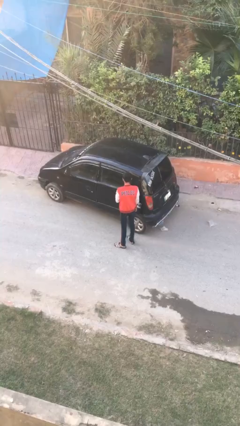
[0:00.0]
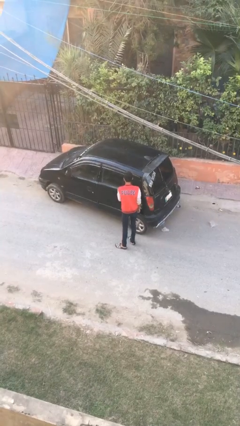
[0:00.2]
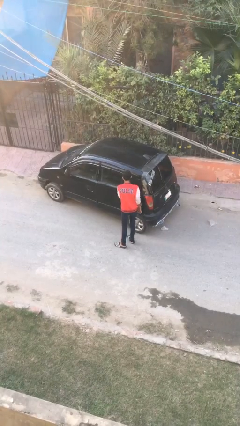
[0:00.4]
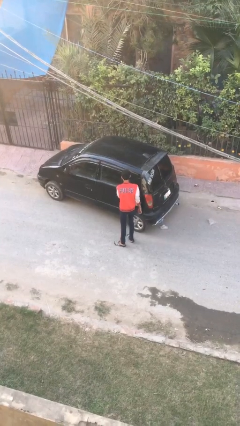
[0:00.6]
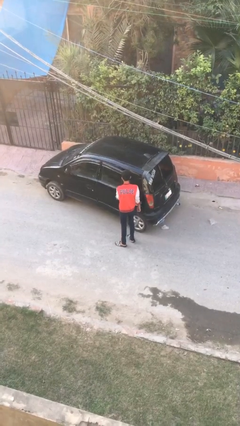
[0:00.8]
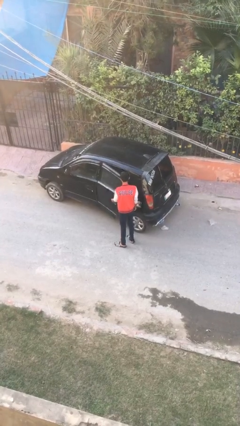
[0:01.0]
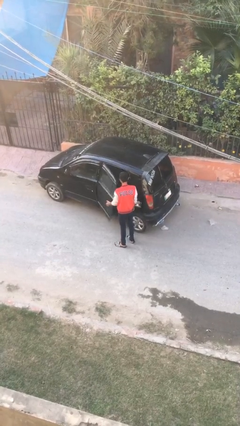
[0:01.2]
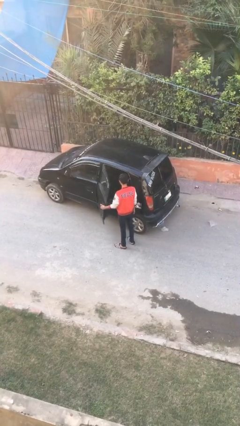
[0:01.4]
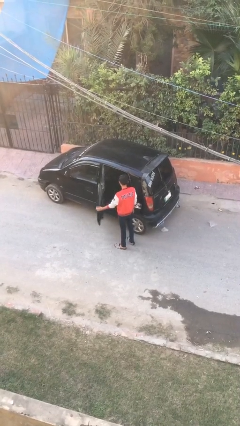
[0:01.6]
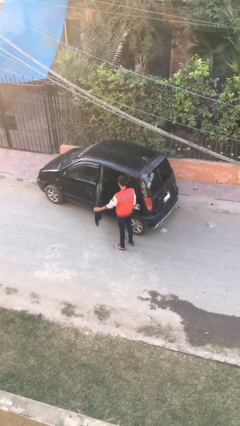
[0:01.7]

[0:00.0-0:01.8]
person opens car door

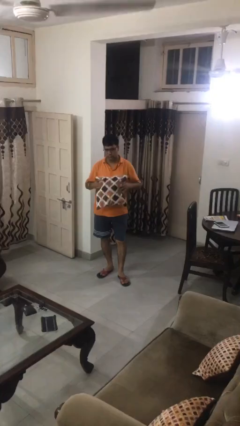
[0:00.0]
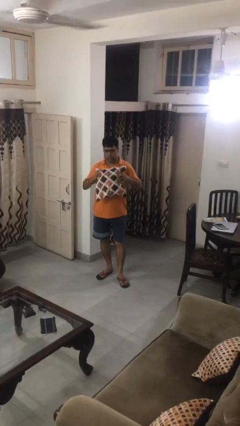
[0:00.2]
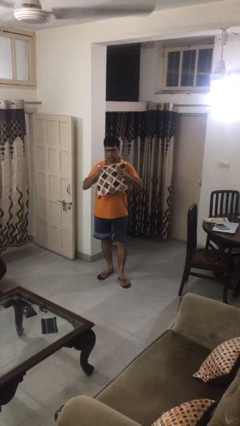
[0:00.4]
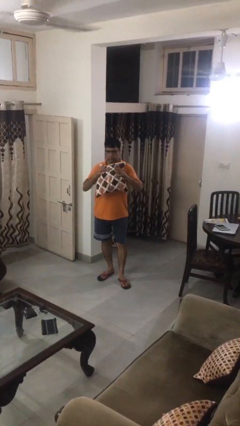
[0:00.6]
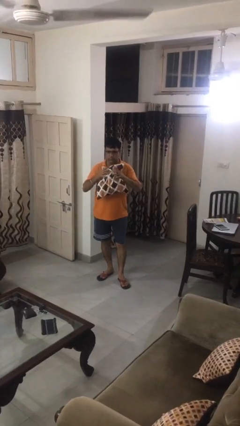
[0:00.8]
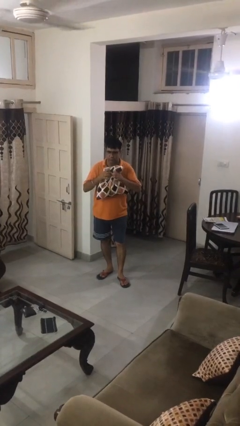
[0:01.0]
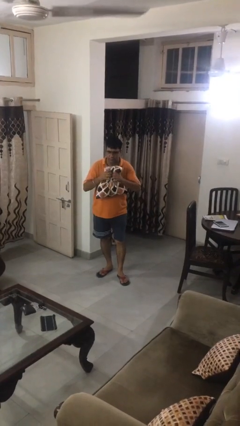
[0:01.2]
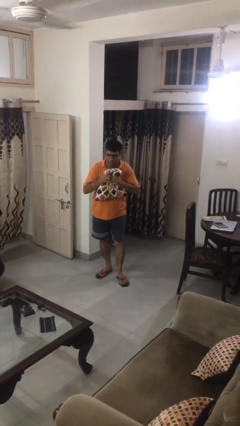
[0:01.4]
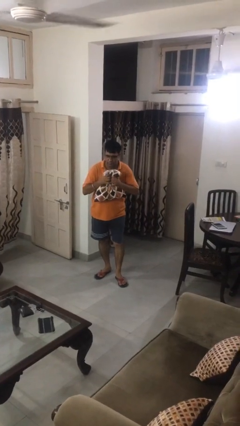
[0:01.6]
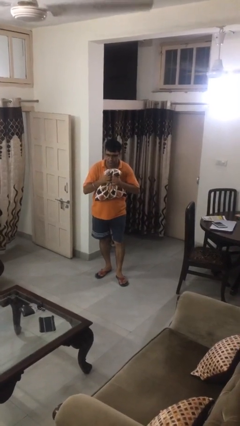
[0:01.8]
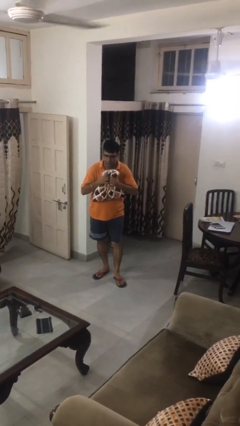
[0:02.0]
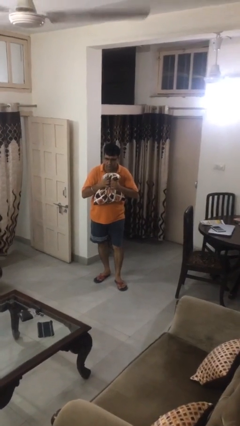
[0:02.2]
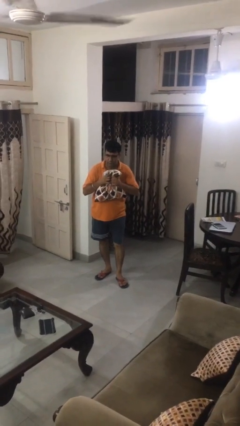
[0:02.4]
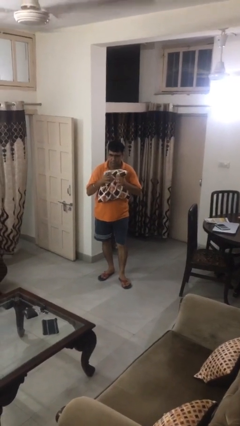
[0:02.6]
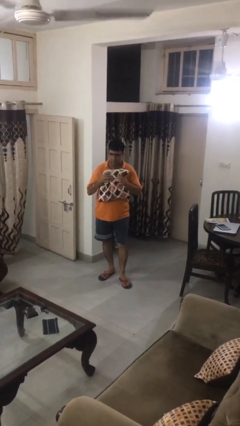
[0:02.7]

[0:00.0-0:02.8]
person squeezes object

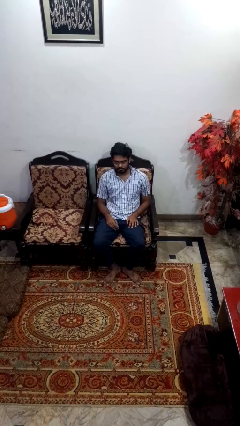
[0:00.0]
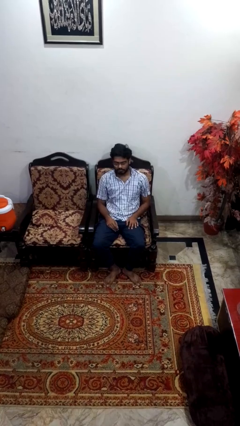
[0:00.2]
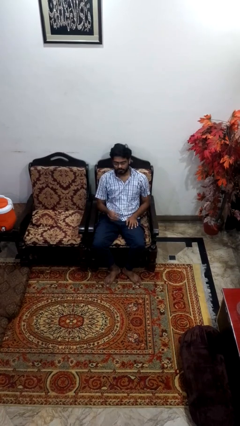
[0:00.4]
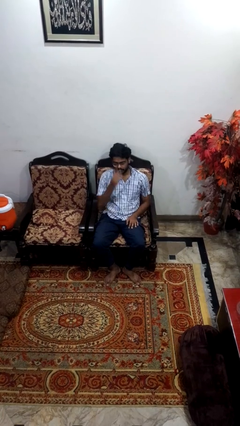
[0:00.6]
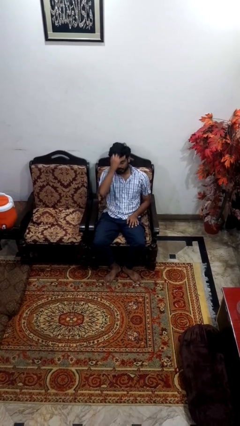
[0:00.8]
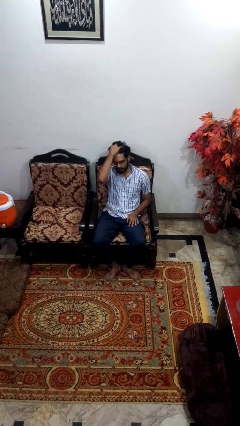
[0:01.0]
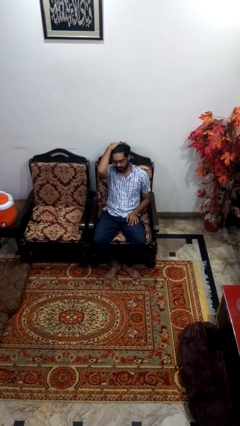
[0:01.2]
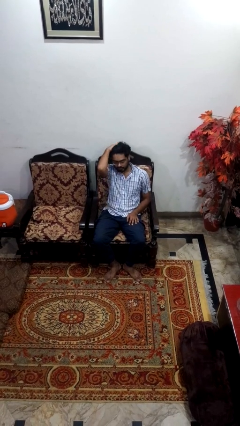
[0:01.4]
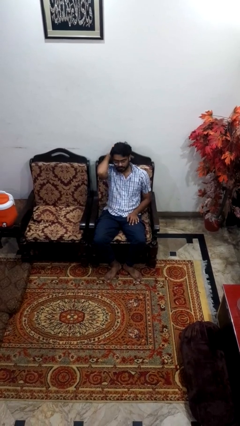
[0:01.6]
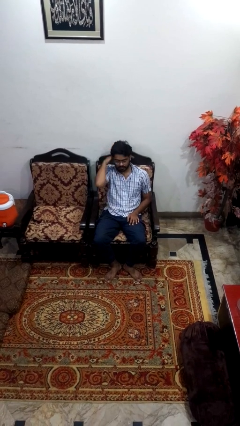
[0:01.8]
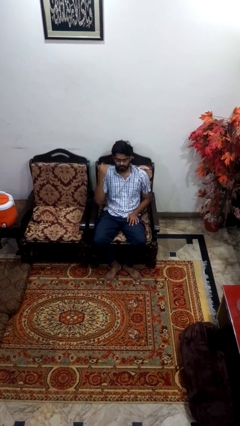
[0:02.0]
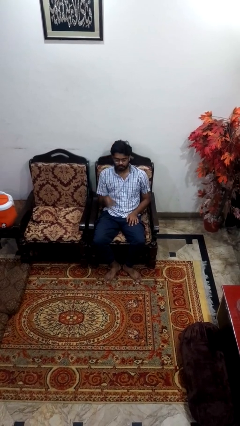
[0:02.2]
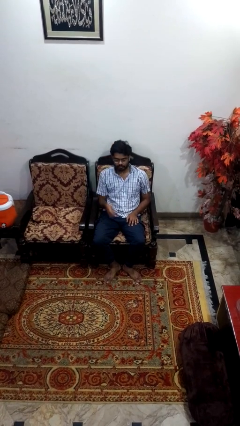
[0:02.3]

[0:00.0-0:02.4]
person strokes hair

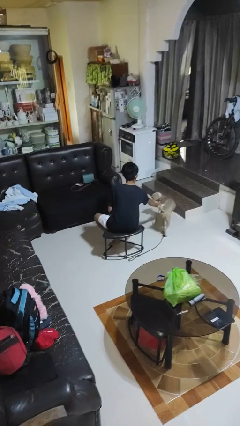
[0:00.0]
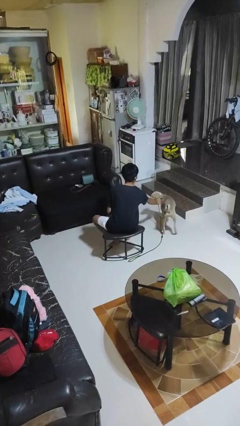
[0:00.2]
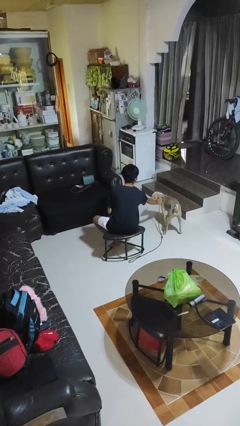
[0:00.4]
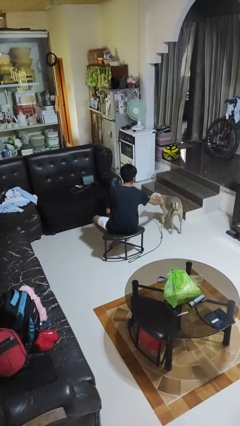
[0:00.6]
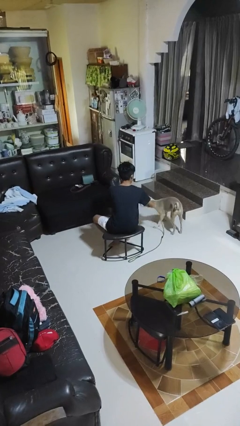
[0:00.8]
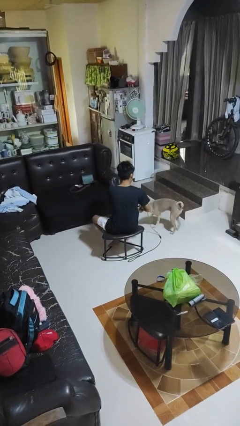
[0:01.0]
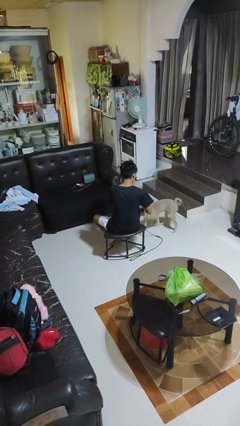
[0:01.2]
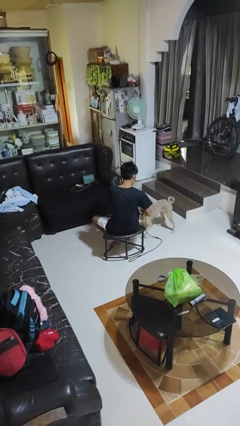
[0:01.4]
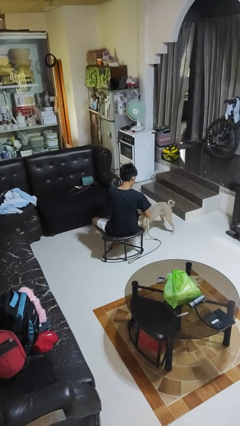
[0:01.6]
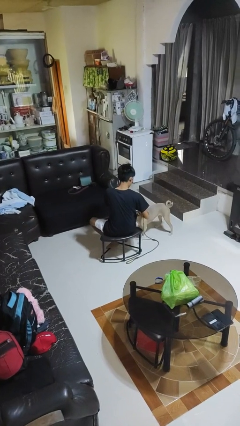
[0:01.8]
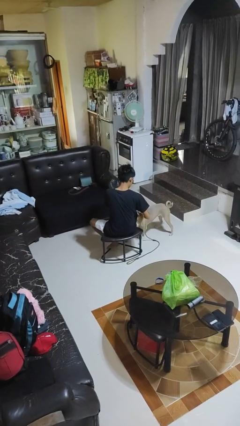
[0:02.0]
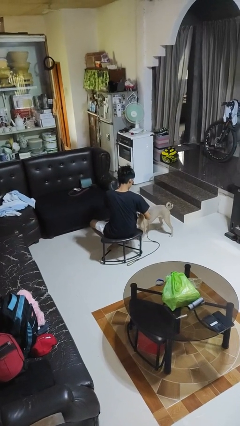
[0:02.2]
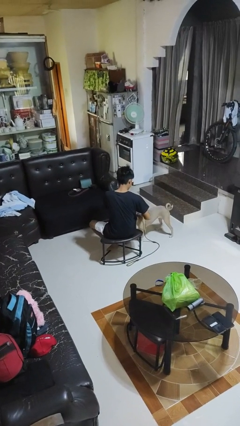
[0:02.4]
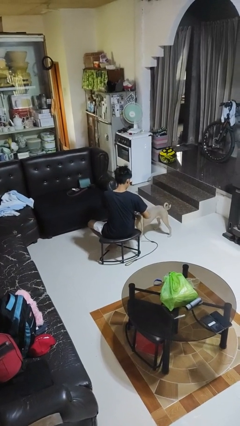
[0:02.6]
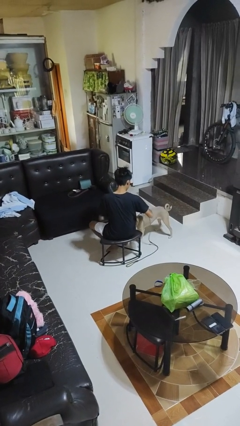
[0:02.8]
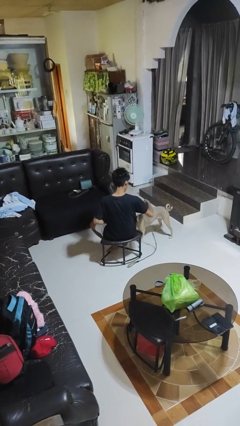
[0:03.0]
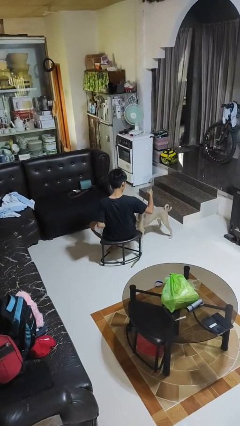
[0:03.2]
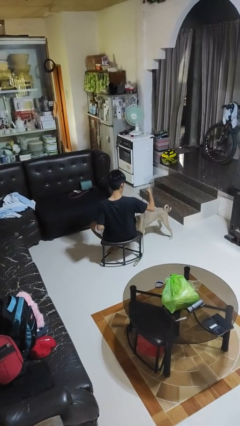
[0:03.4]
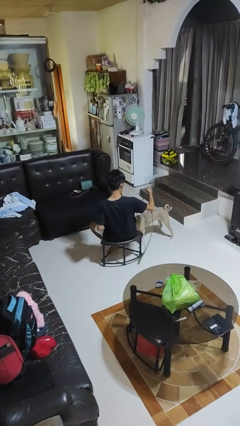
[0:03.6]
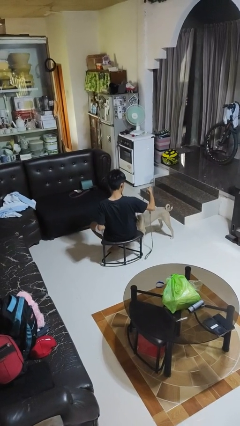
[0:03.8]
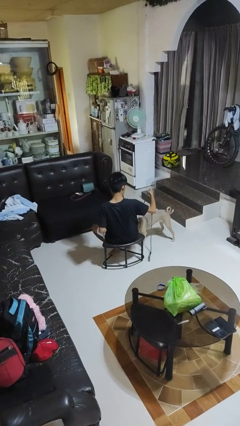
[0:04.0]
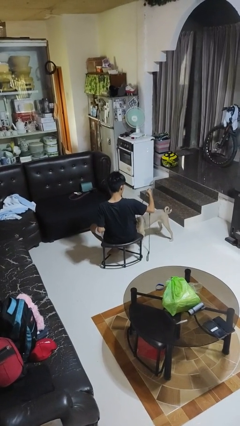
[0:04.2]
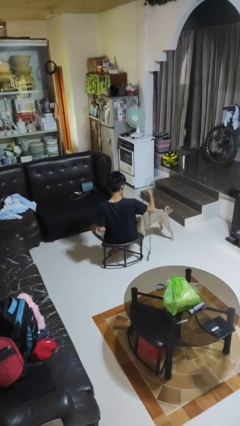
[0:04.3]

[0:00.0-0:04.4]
person attaches leash to dog

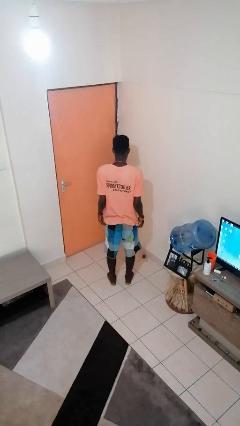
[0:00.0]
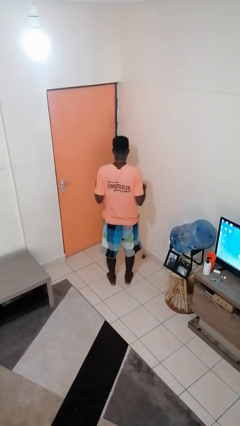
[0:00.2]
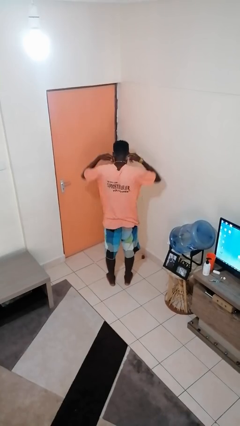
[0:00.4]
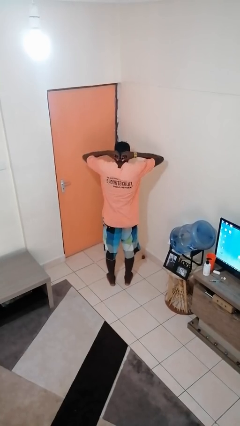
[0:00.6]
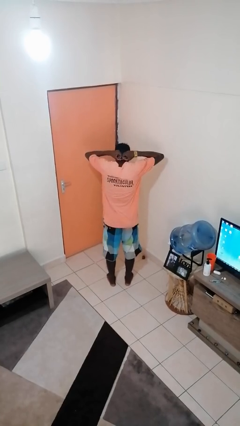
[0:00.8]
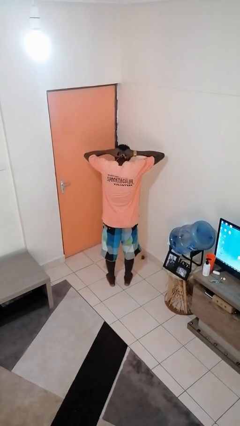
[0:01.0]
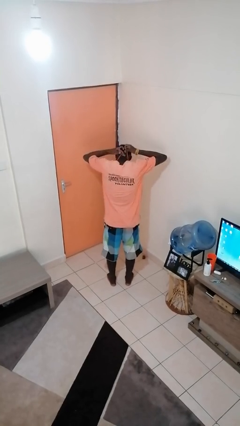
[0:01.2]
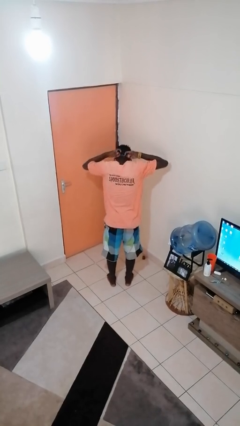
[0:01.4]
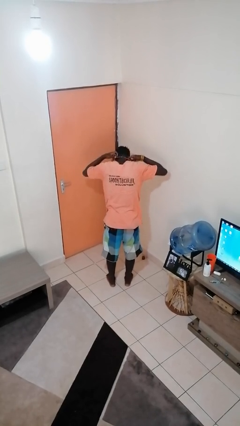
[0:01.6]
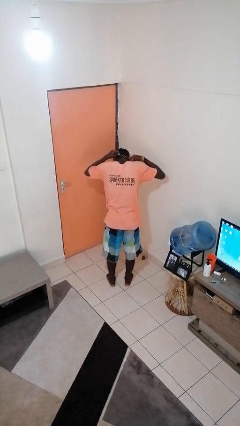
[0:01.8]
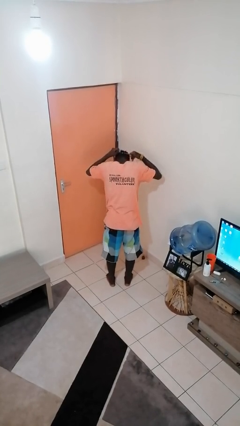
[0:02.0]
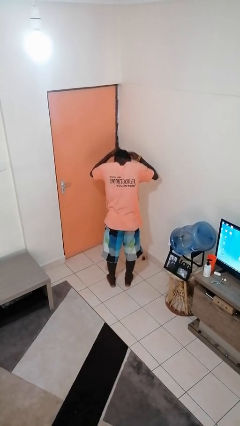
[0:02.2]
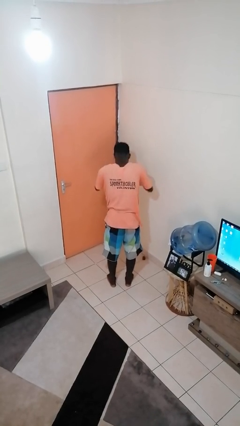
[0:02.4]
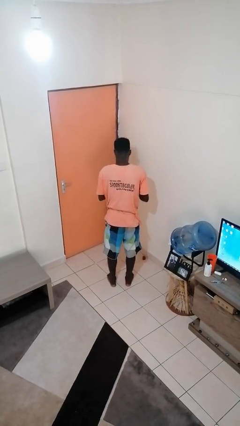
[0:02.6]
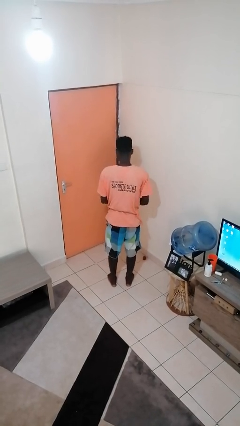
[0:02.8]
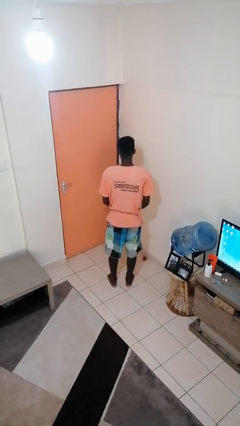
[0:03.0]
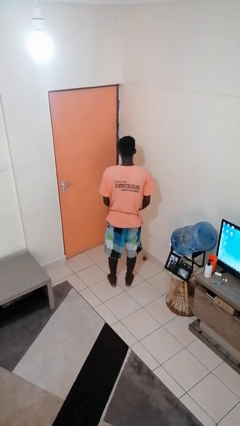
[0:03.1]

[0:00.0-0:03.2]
person takes off necklace

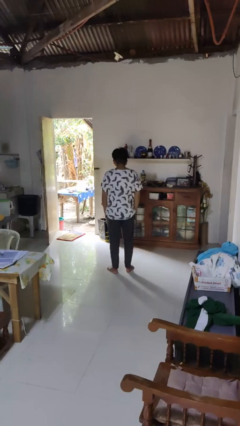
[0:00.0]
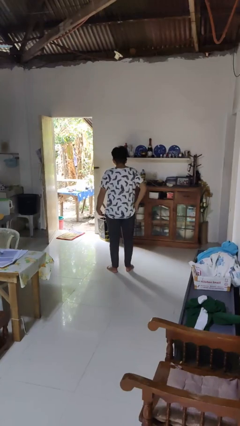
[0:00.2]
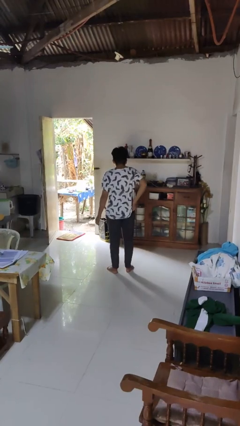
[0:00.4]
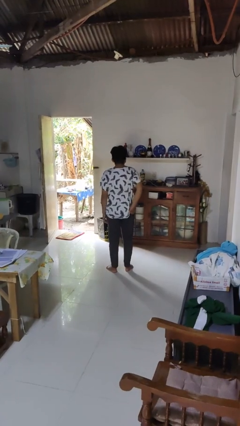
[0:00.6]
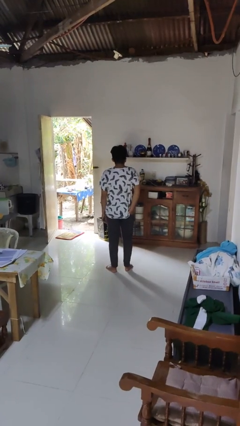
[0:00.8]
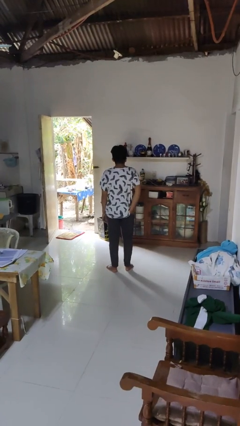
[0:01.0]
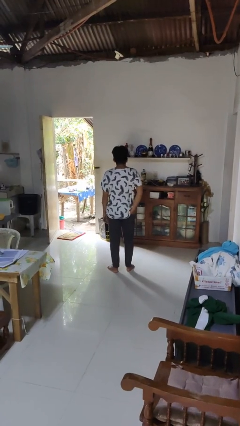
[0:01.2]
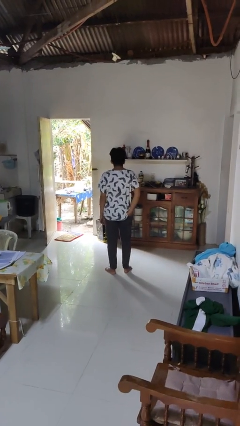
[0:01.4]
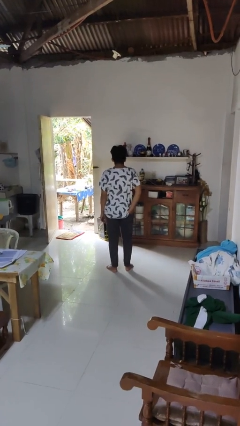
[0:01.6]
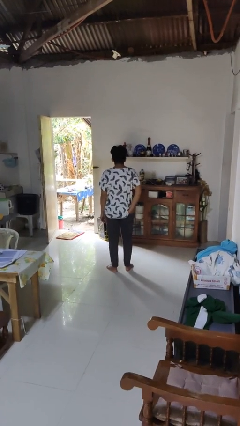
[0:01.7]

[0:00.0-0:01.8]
person puts hands in back pockets

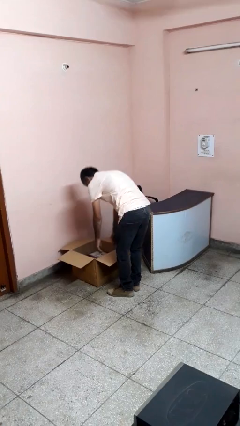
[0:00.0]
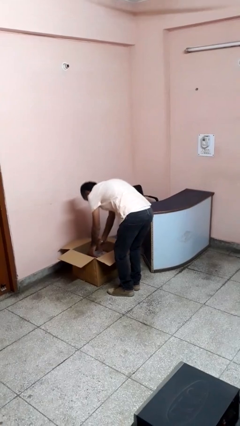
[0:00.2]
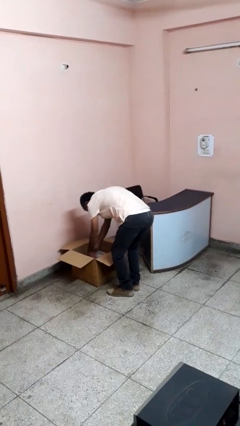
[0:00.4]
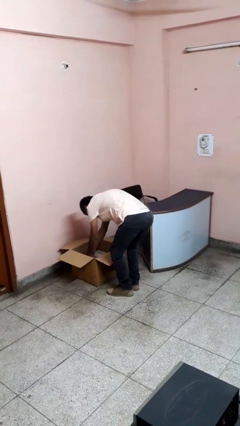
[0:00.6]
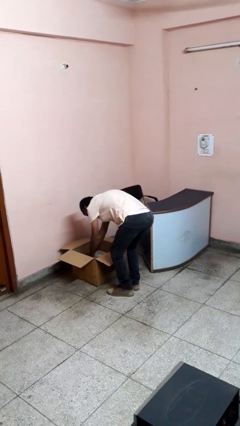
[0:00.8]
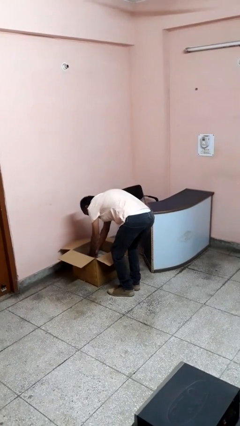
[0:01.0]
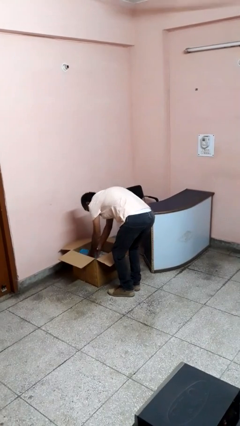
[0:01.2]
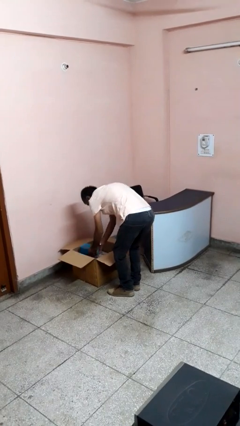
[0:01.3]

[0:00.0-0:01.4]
person takes object from box
